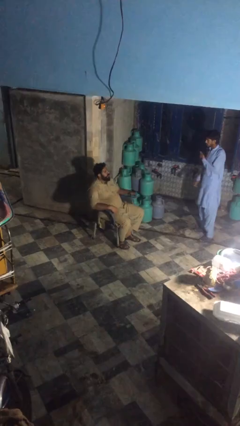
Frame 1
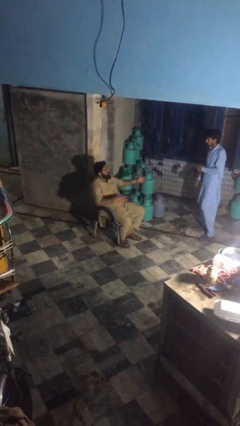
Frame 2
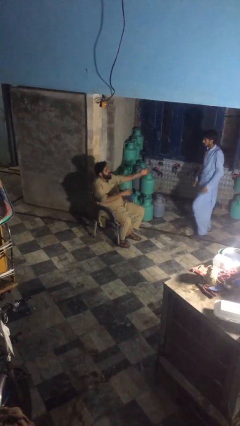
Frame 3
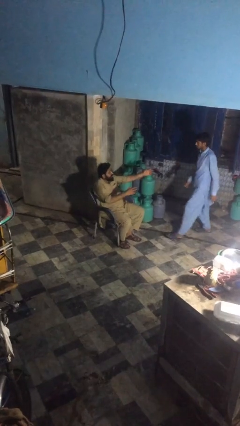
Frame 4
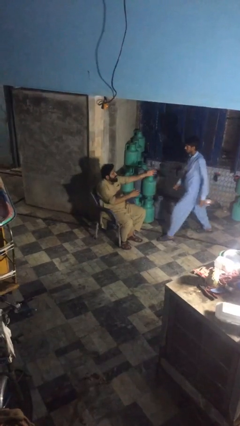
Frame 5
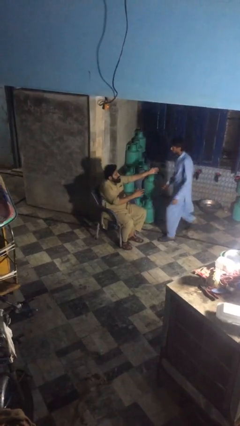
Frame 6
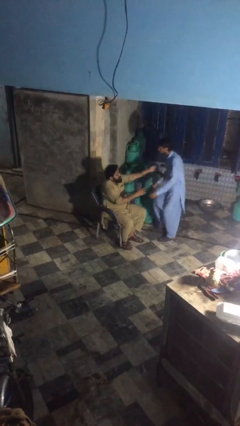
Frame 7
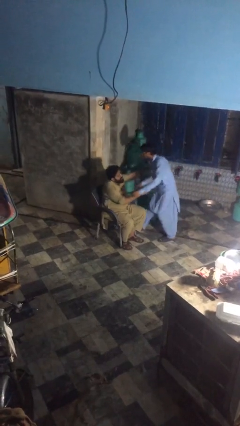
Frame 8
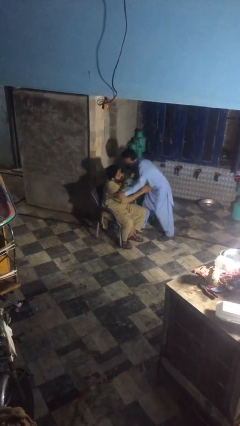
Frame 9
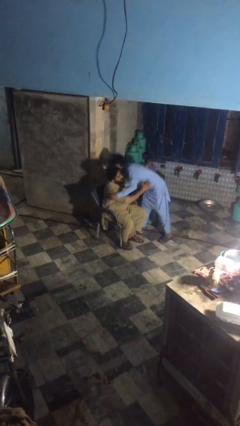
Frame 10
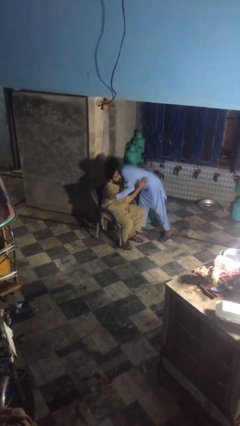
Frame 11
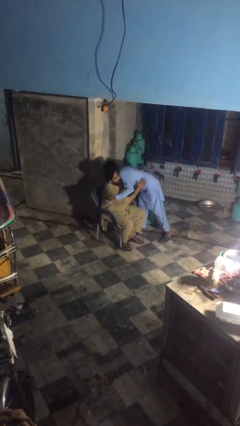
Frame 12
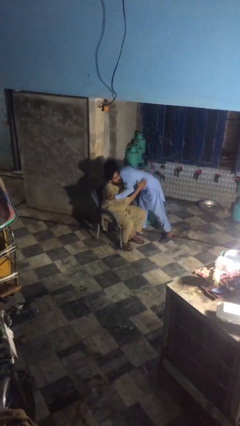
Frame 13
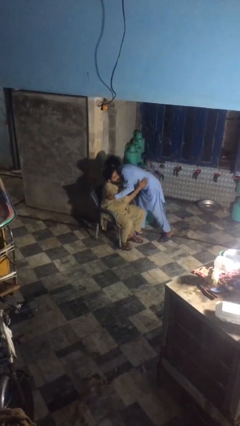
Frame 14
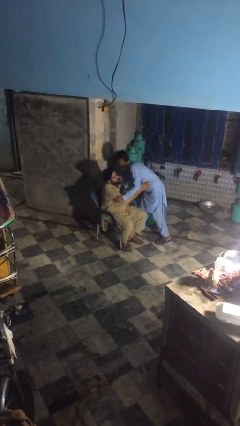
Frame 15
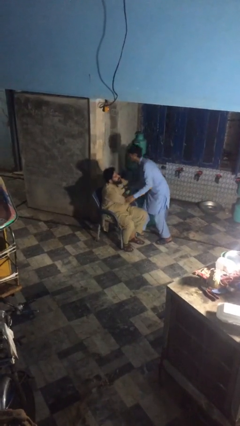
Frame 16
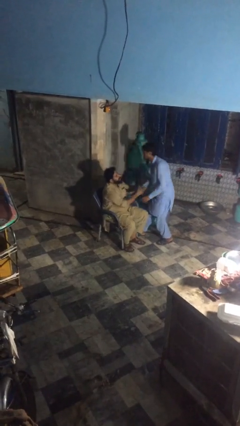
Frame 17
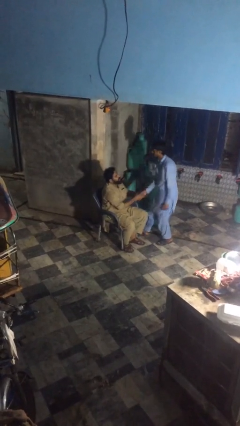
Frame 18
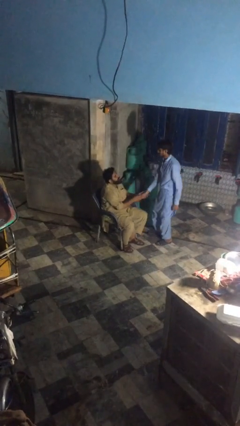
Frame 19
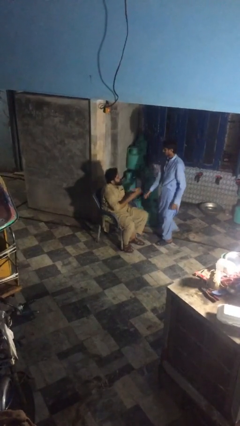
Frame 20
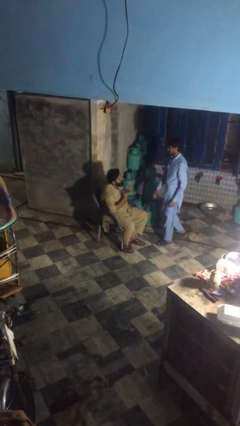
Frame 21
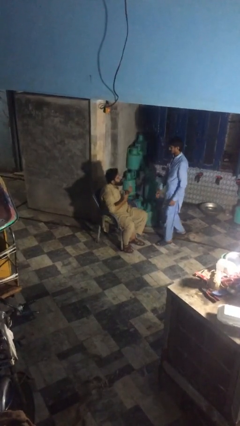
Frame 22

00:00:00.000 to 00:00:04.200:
person embraces person

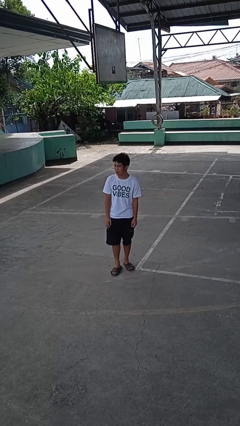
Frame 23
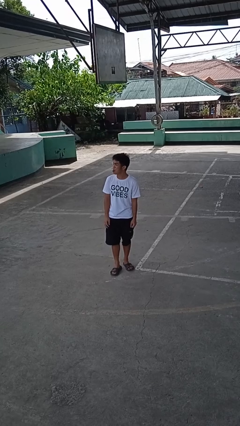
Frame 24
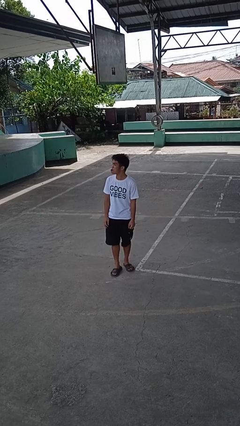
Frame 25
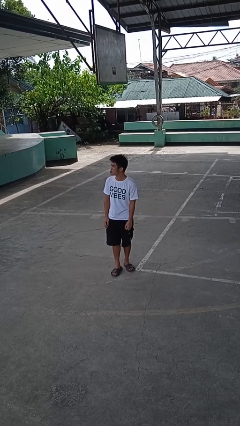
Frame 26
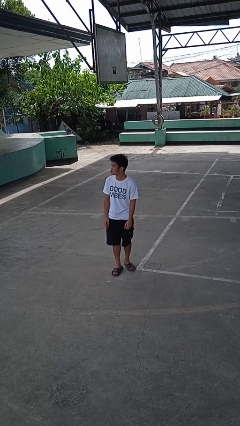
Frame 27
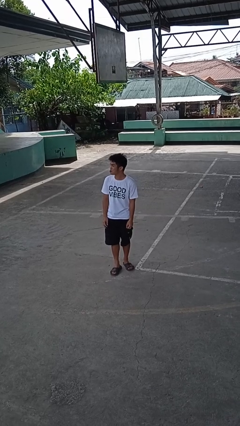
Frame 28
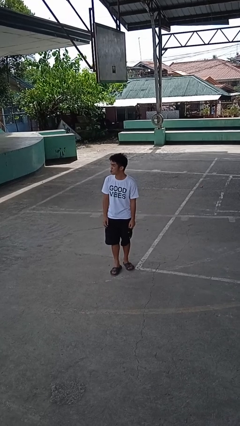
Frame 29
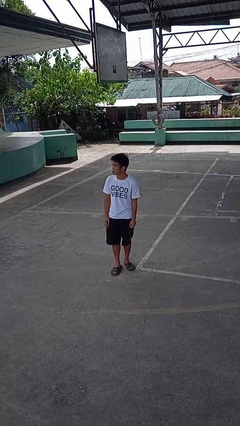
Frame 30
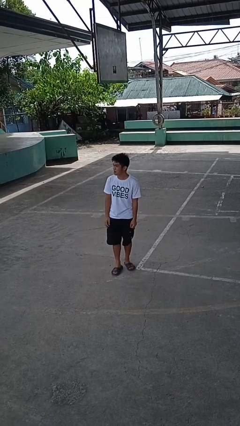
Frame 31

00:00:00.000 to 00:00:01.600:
person sticks out tongue

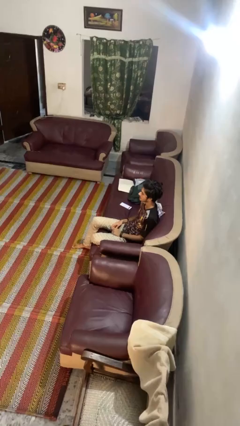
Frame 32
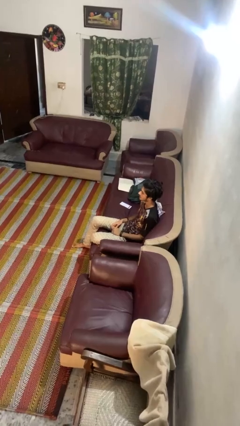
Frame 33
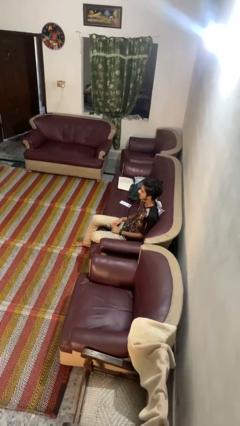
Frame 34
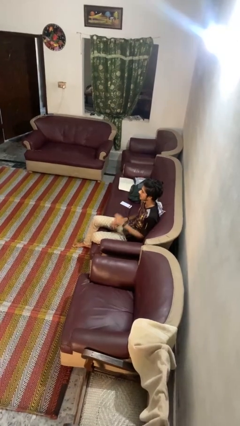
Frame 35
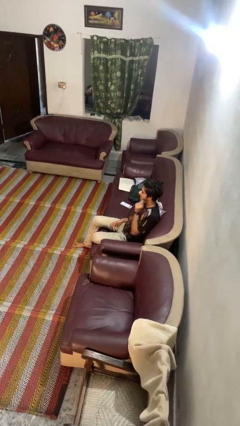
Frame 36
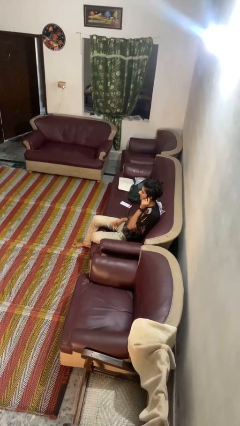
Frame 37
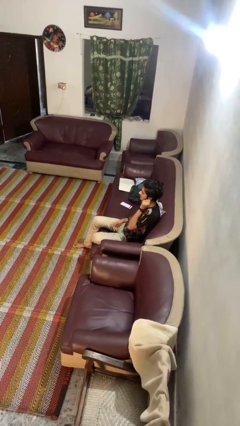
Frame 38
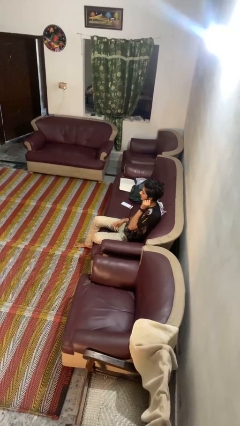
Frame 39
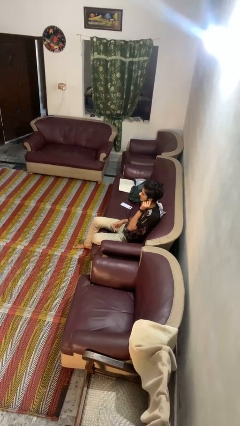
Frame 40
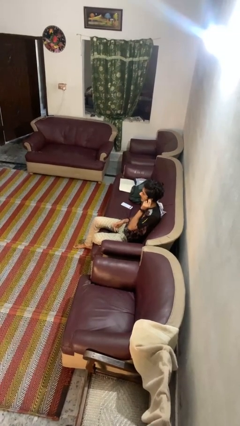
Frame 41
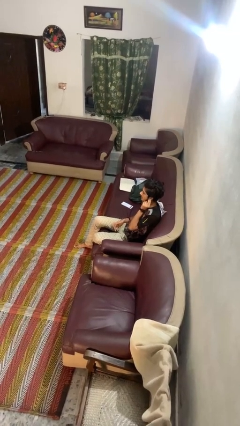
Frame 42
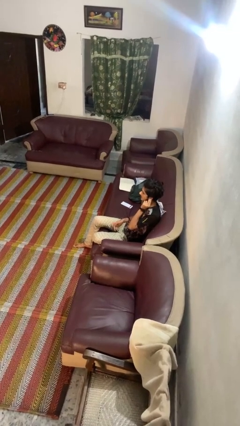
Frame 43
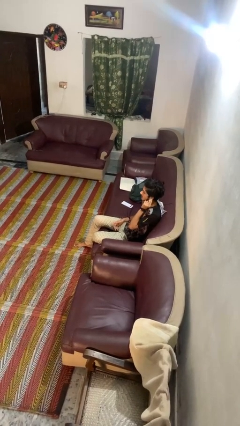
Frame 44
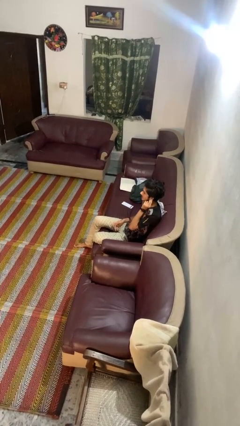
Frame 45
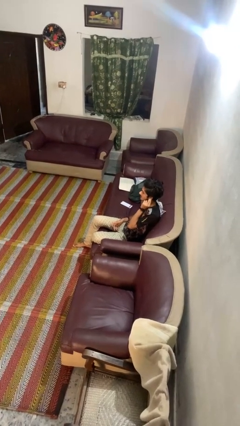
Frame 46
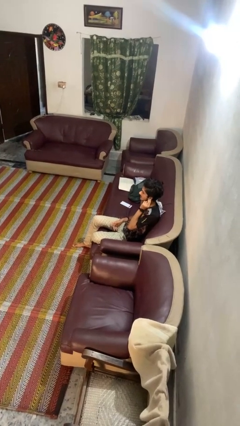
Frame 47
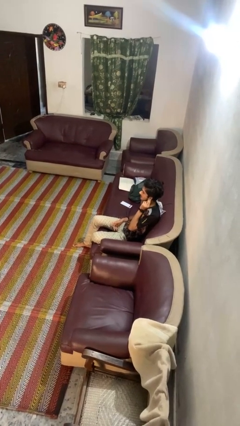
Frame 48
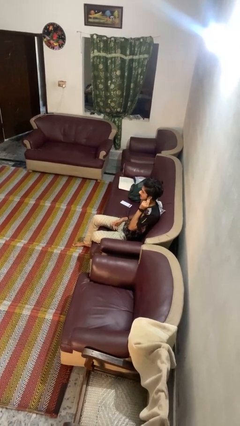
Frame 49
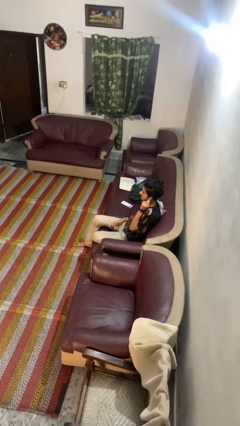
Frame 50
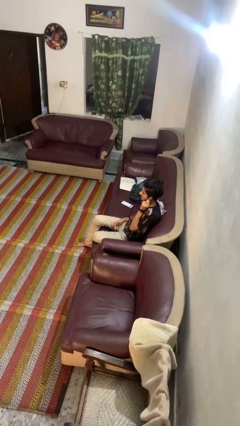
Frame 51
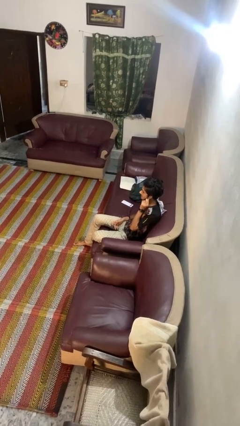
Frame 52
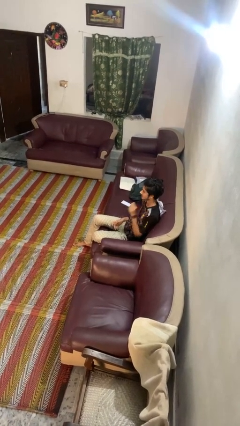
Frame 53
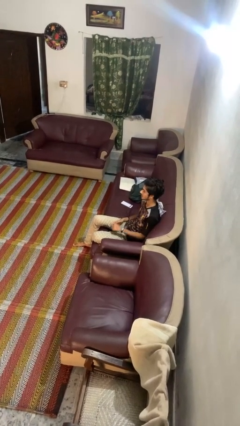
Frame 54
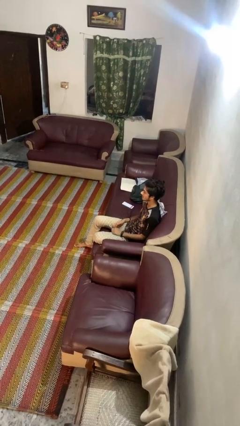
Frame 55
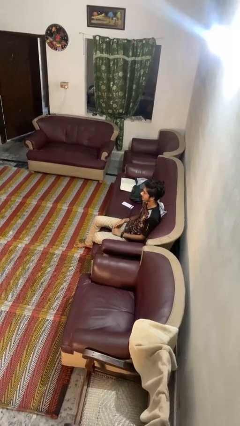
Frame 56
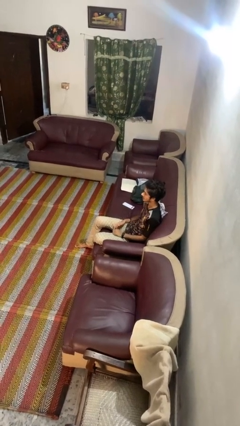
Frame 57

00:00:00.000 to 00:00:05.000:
person touches earlobe

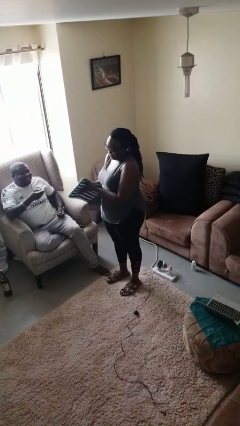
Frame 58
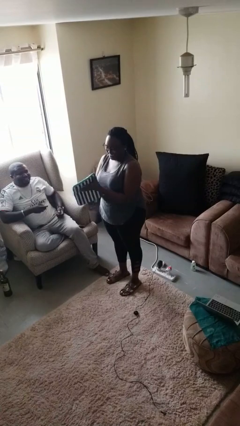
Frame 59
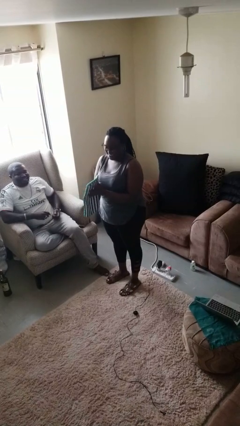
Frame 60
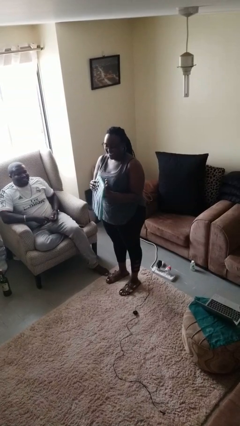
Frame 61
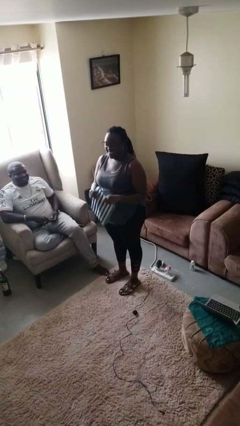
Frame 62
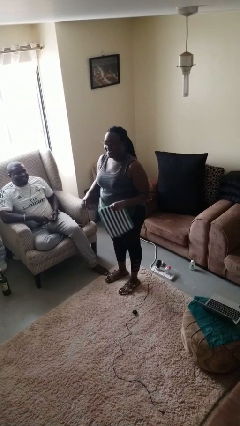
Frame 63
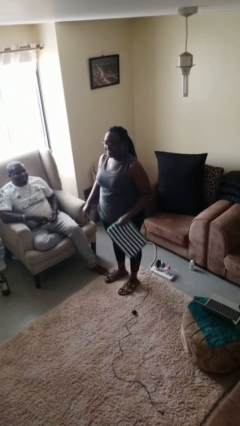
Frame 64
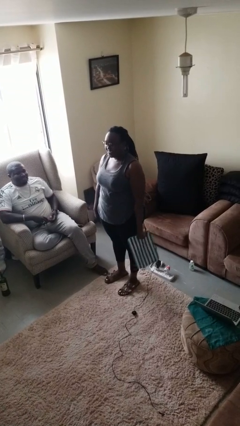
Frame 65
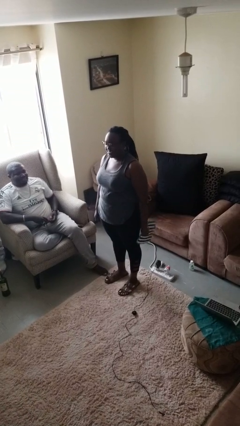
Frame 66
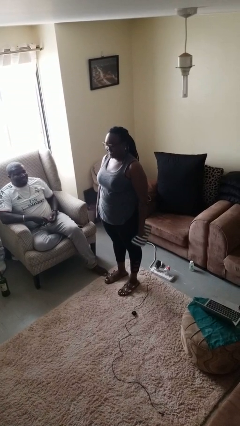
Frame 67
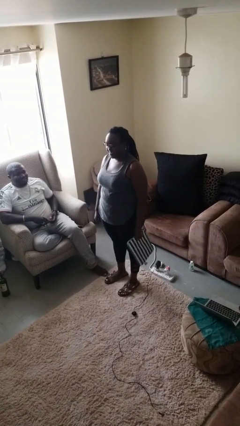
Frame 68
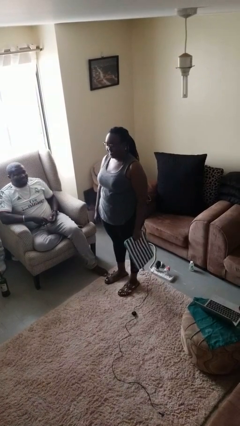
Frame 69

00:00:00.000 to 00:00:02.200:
person catches object from person

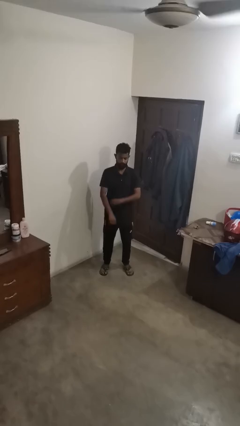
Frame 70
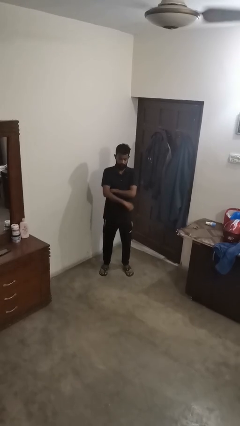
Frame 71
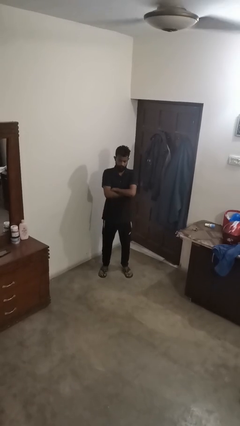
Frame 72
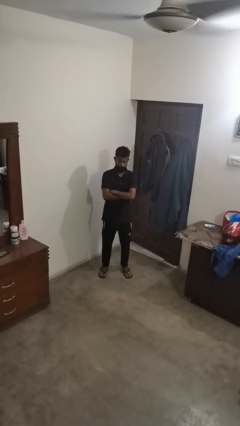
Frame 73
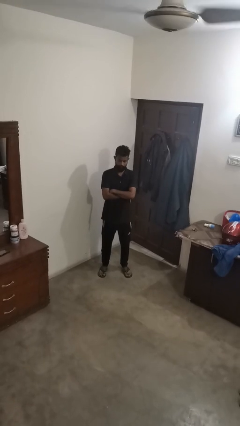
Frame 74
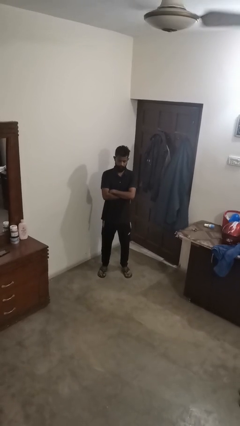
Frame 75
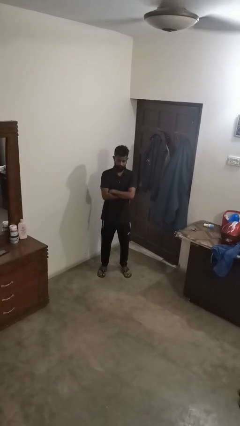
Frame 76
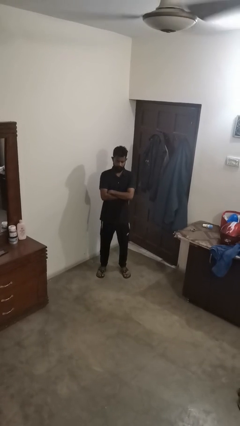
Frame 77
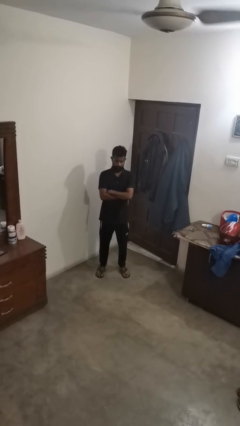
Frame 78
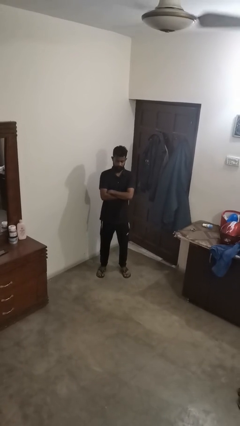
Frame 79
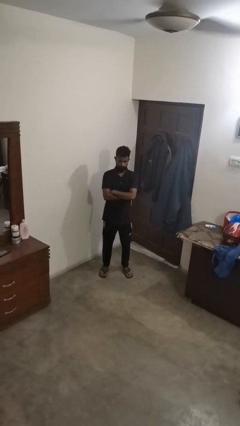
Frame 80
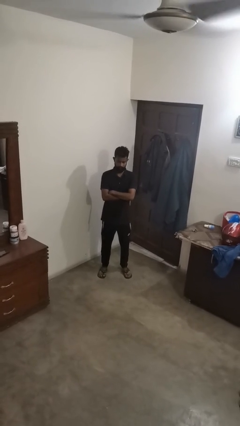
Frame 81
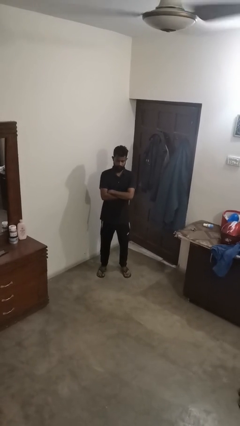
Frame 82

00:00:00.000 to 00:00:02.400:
person crosses arms

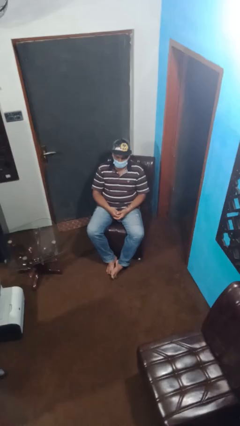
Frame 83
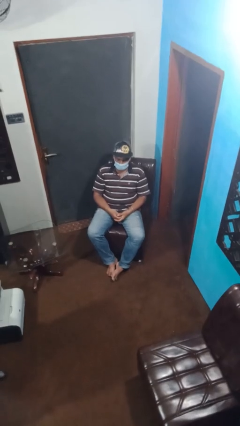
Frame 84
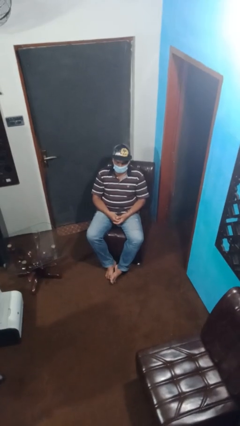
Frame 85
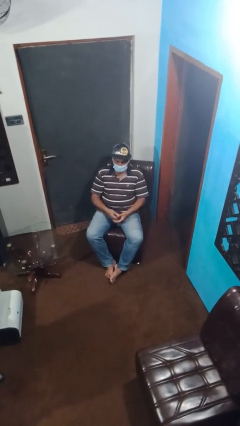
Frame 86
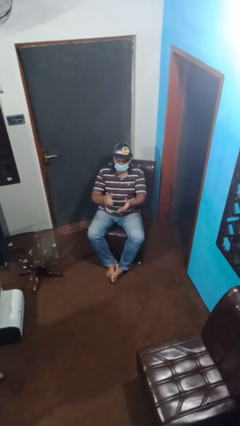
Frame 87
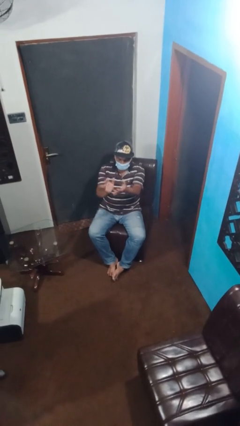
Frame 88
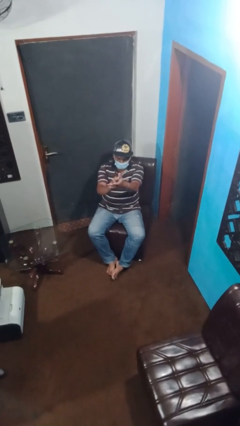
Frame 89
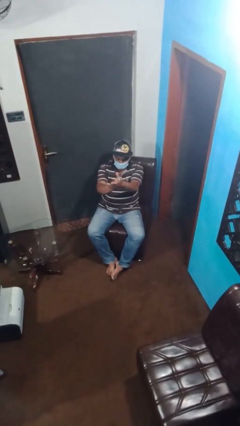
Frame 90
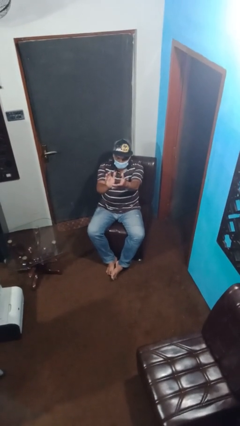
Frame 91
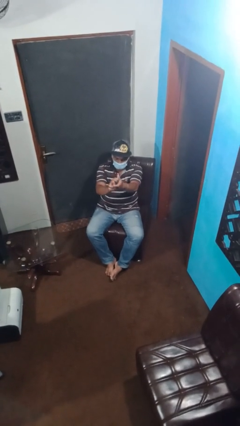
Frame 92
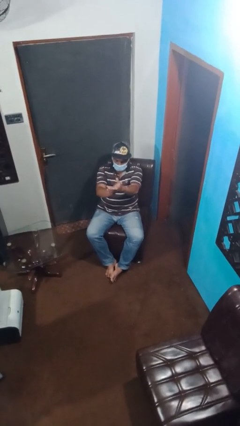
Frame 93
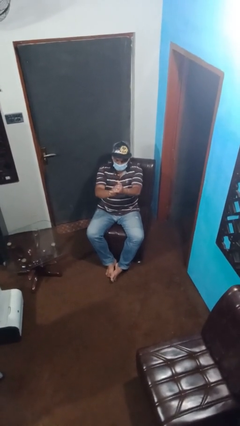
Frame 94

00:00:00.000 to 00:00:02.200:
person claps hands
